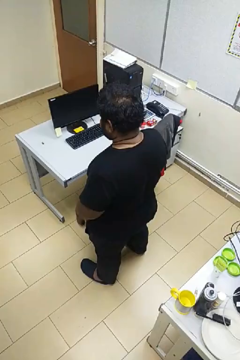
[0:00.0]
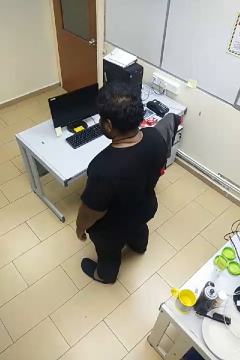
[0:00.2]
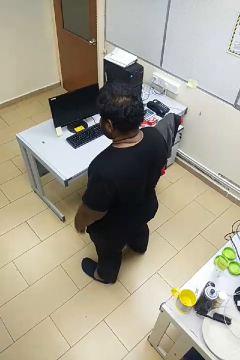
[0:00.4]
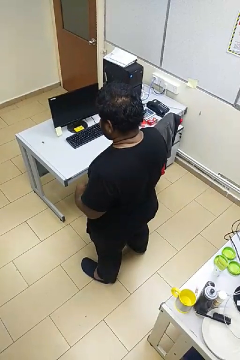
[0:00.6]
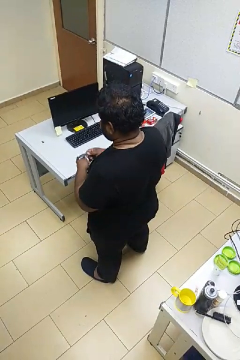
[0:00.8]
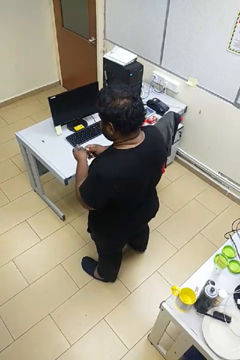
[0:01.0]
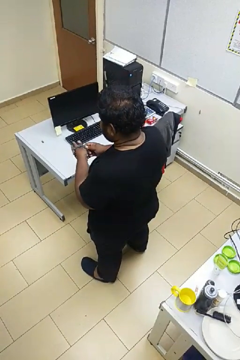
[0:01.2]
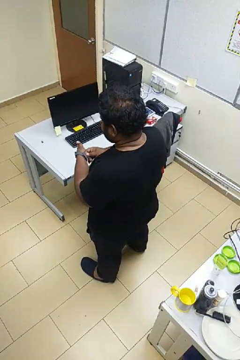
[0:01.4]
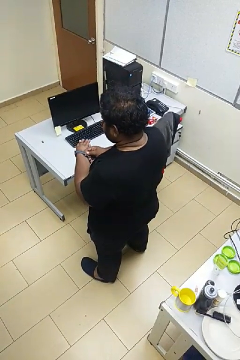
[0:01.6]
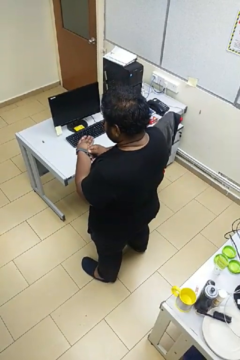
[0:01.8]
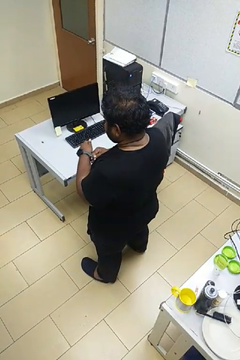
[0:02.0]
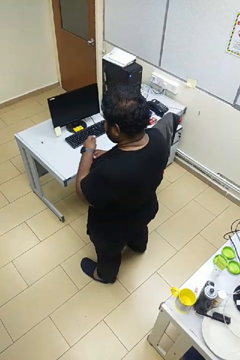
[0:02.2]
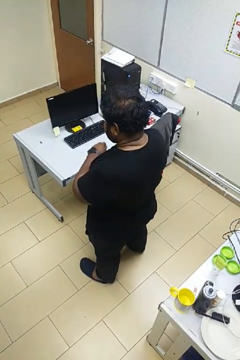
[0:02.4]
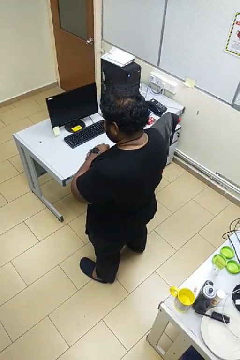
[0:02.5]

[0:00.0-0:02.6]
person puts on wristwatch

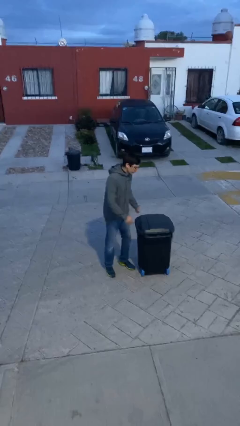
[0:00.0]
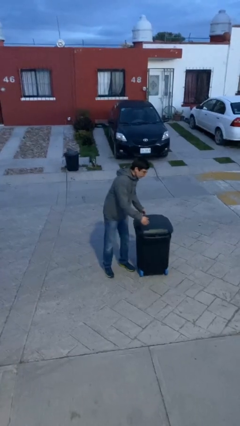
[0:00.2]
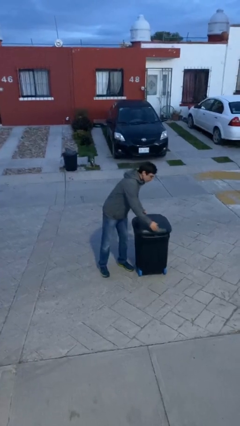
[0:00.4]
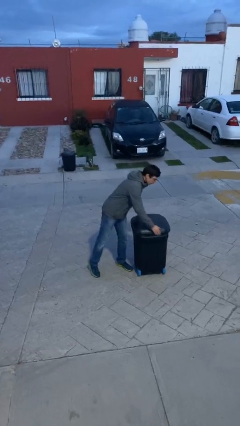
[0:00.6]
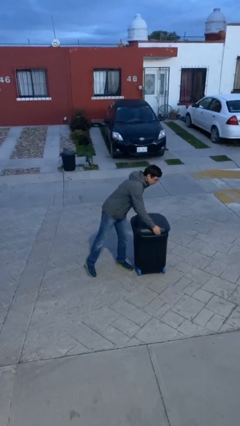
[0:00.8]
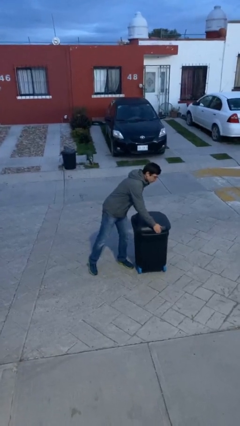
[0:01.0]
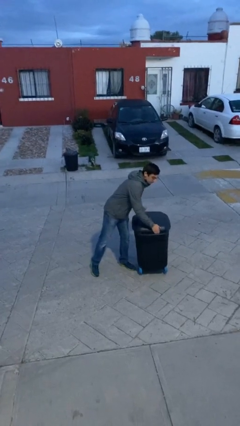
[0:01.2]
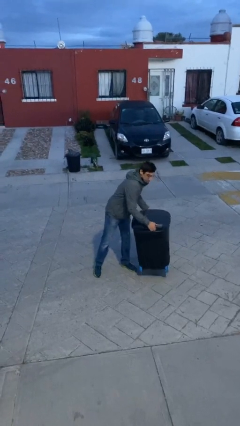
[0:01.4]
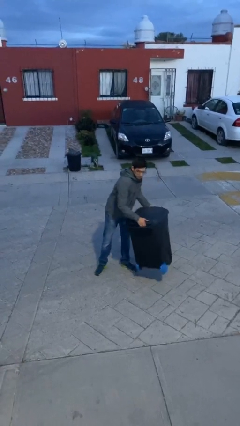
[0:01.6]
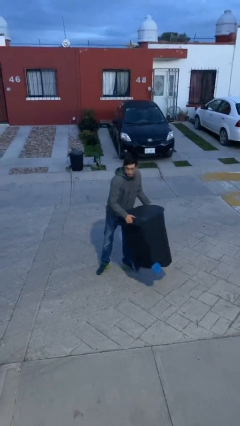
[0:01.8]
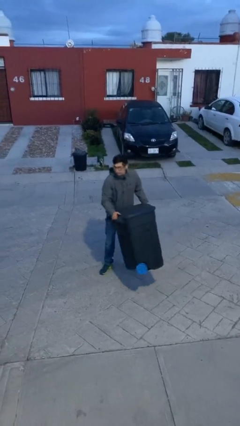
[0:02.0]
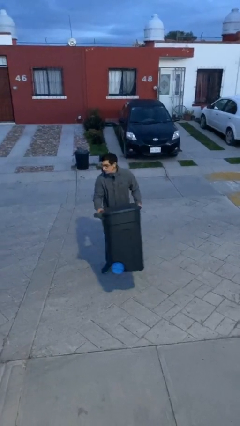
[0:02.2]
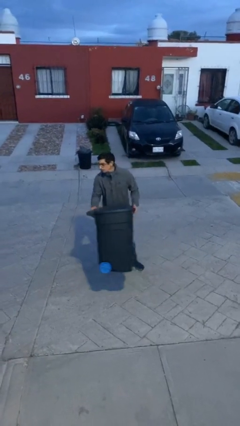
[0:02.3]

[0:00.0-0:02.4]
person picks up object from floor

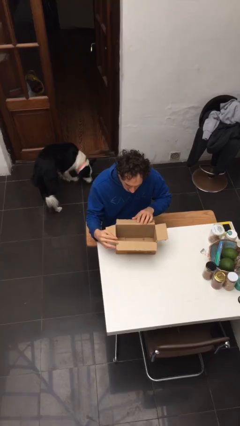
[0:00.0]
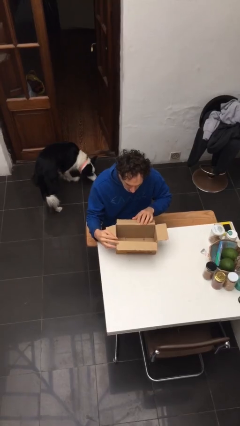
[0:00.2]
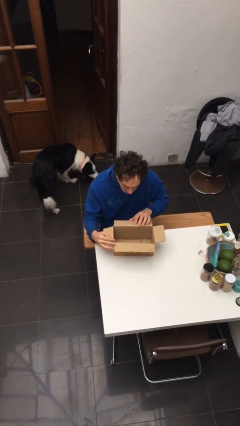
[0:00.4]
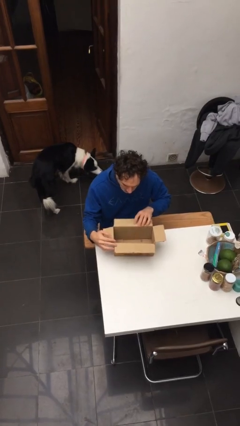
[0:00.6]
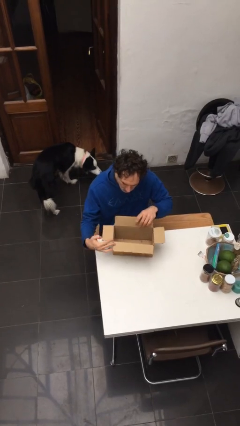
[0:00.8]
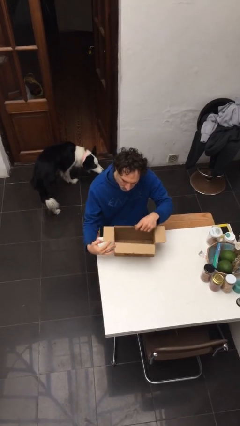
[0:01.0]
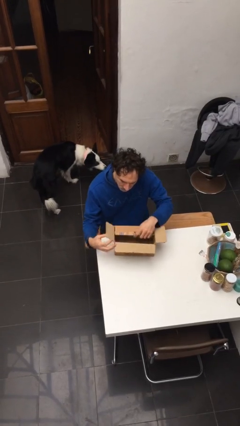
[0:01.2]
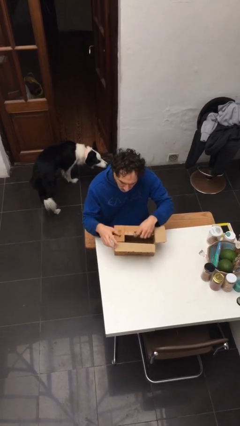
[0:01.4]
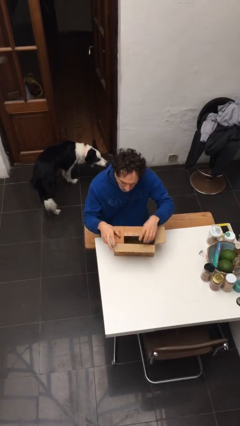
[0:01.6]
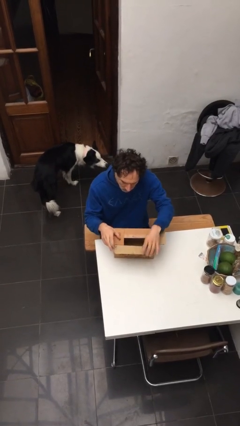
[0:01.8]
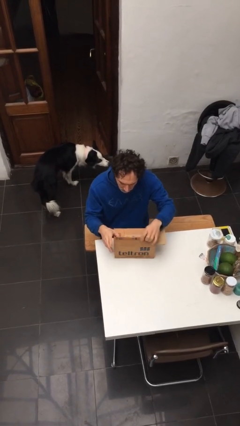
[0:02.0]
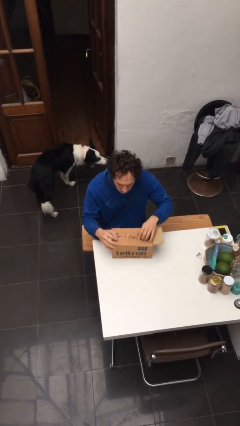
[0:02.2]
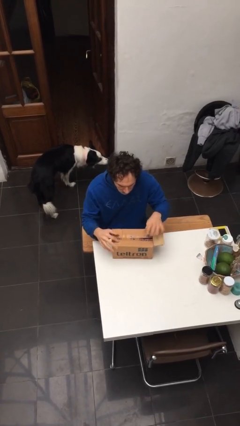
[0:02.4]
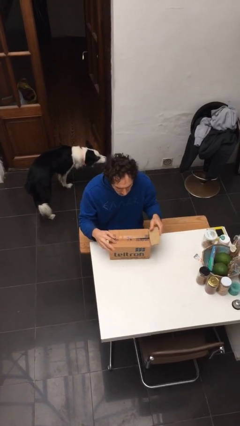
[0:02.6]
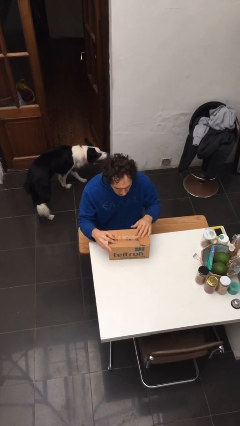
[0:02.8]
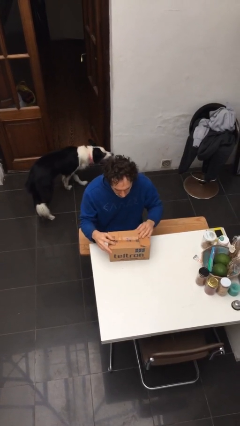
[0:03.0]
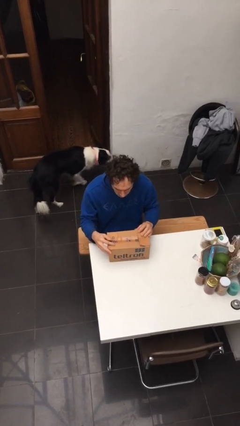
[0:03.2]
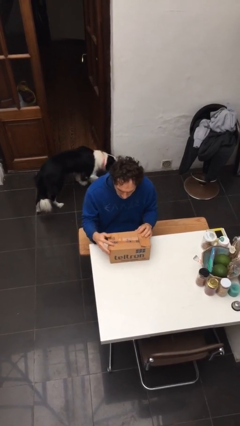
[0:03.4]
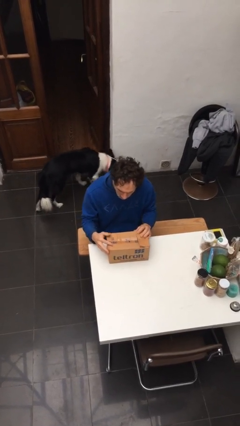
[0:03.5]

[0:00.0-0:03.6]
person closes box

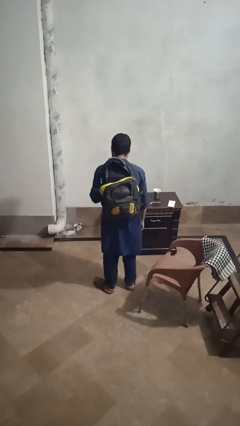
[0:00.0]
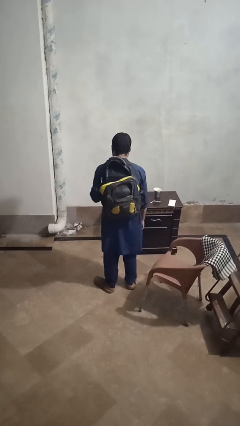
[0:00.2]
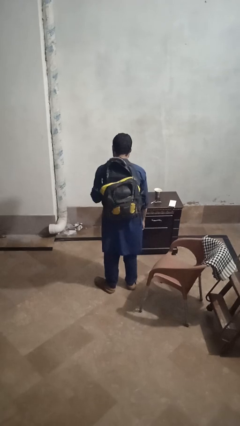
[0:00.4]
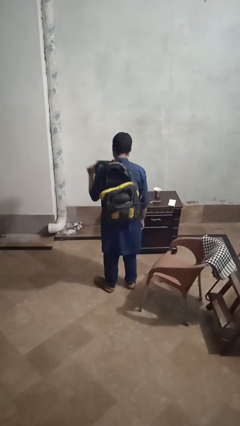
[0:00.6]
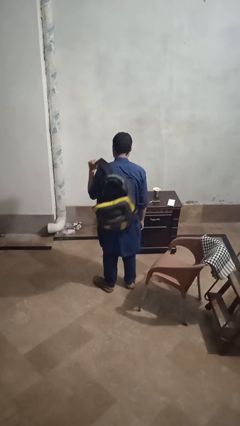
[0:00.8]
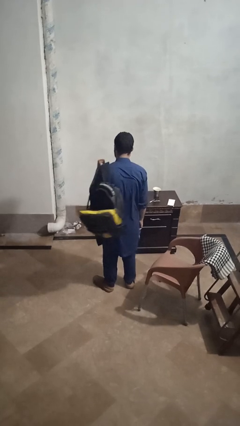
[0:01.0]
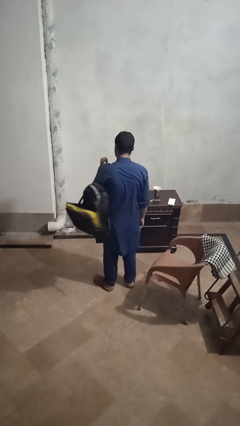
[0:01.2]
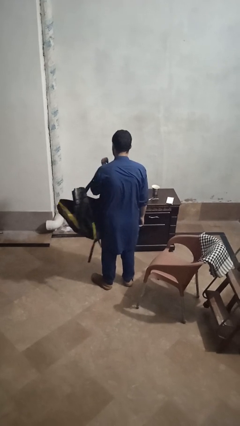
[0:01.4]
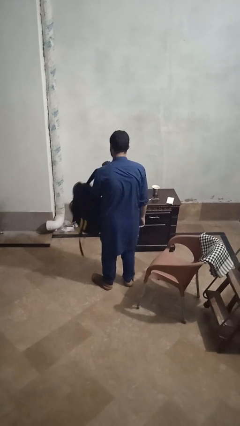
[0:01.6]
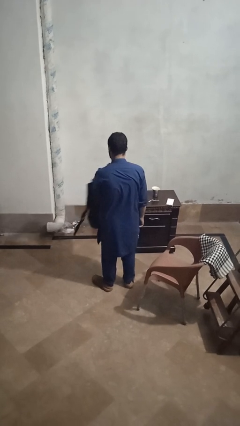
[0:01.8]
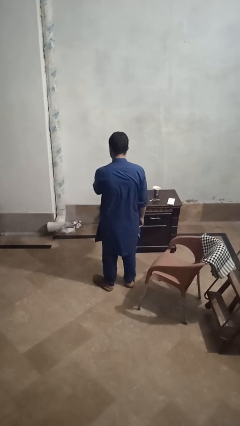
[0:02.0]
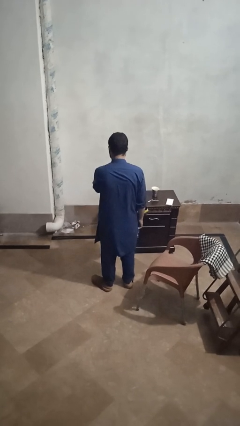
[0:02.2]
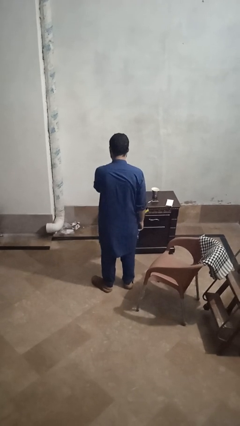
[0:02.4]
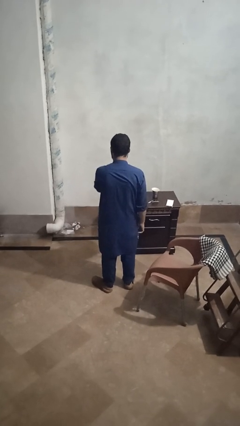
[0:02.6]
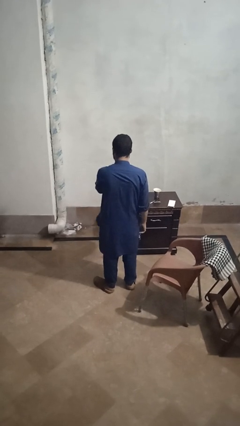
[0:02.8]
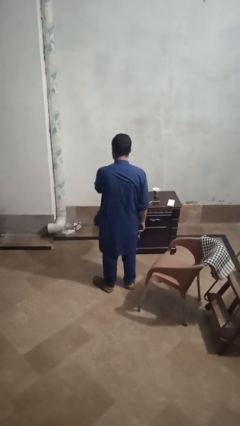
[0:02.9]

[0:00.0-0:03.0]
person takes off backpack

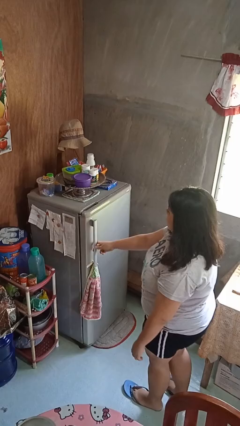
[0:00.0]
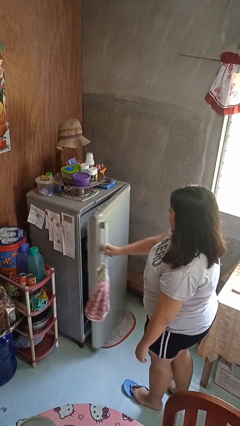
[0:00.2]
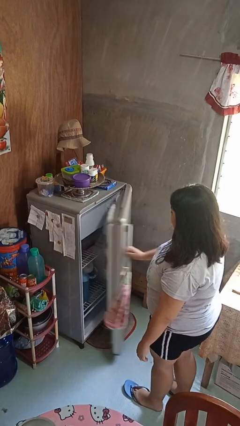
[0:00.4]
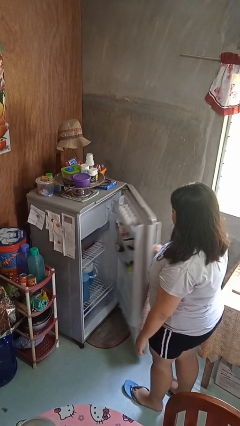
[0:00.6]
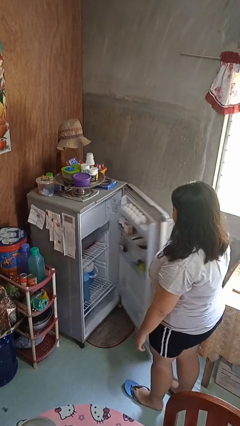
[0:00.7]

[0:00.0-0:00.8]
person opens refrigerator

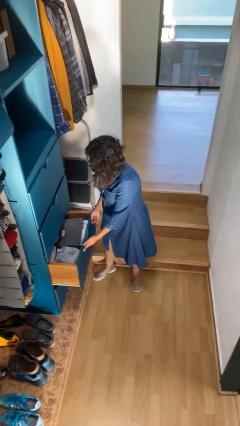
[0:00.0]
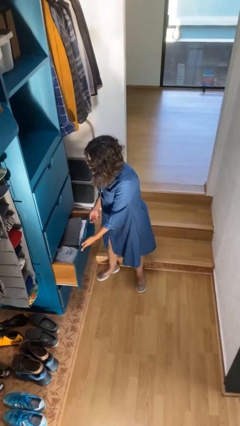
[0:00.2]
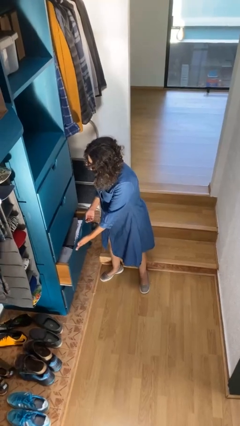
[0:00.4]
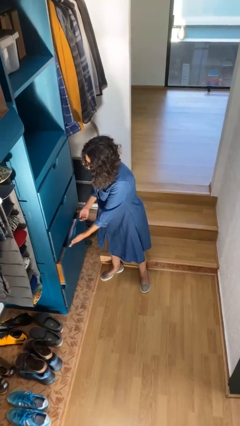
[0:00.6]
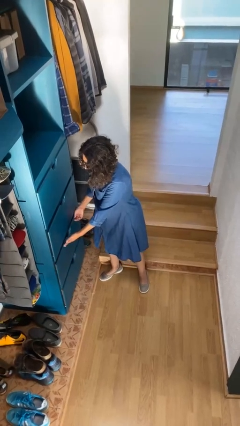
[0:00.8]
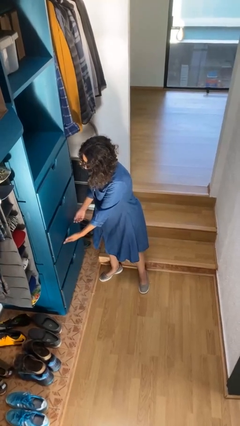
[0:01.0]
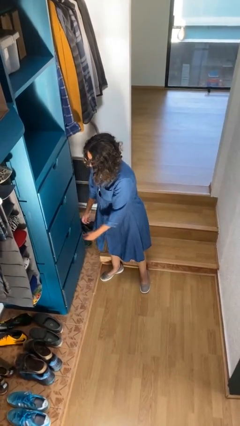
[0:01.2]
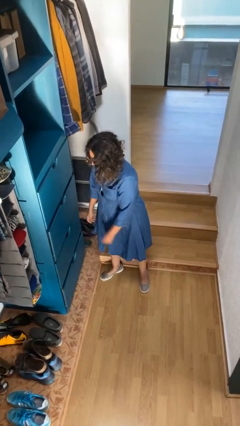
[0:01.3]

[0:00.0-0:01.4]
person closes dresser drawer

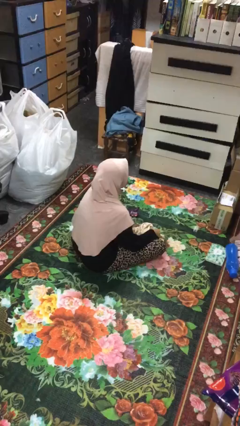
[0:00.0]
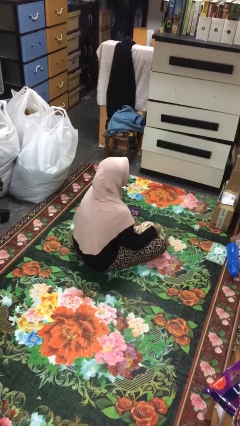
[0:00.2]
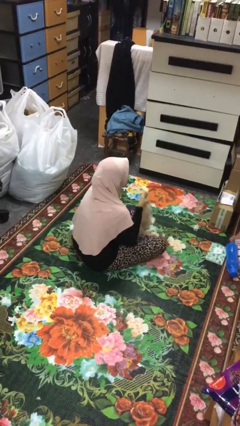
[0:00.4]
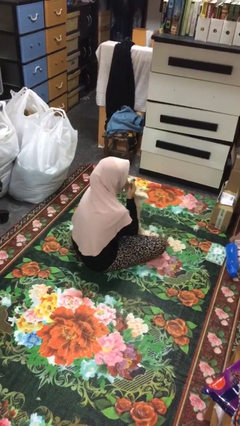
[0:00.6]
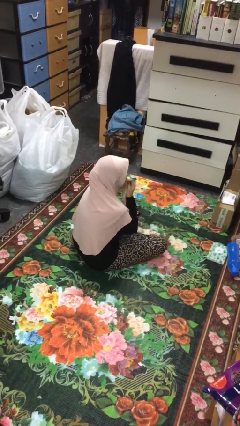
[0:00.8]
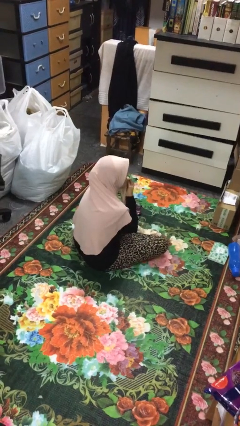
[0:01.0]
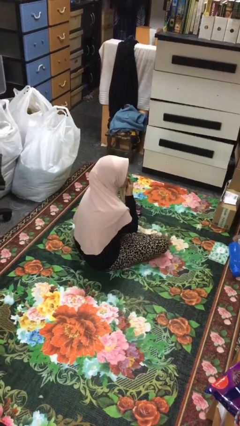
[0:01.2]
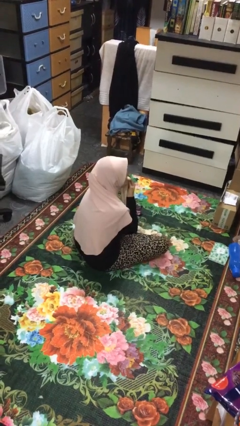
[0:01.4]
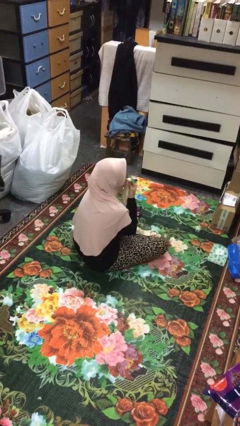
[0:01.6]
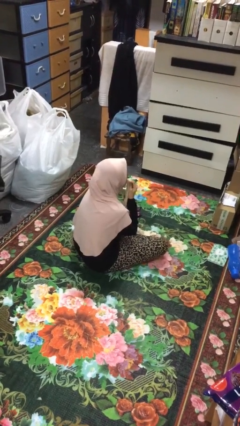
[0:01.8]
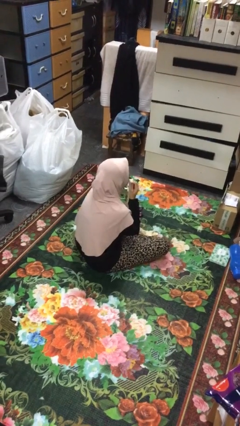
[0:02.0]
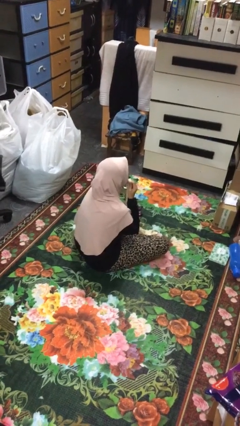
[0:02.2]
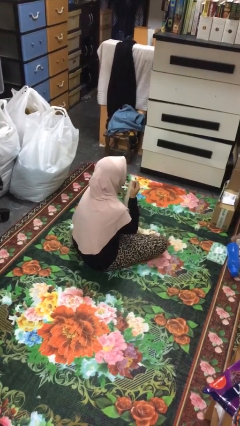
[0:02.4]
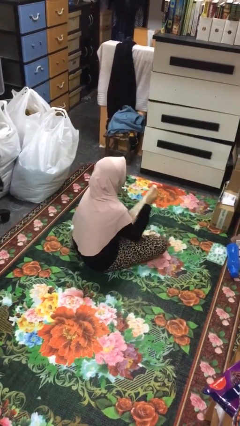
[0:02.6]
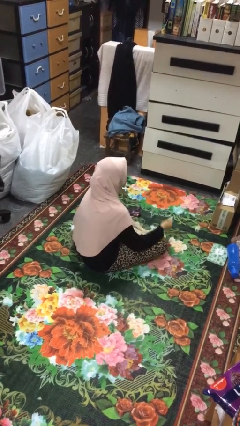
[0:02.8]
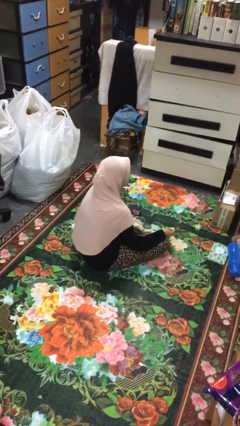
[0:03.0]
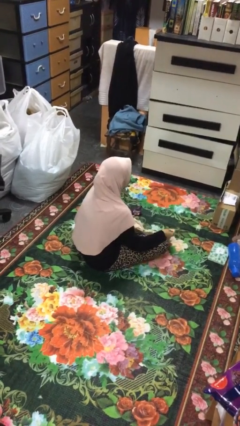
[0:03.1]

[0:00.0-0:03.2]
person wipes mouth with napkin

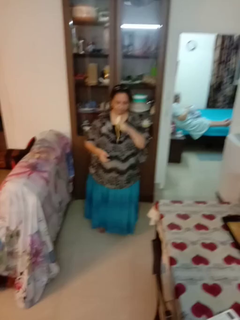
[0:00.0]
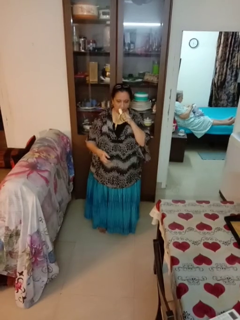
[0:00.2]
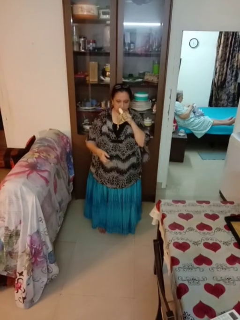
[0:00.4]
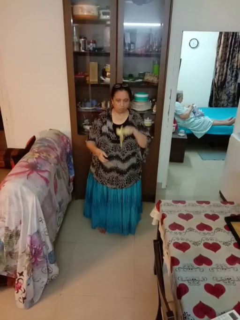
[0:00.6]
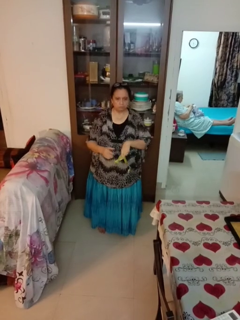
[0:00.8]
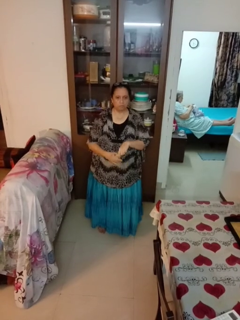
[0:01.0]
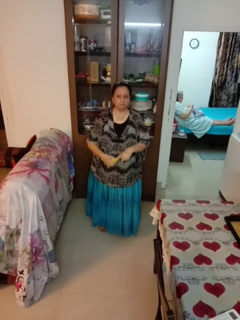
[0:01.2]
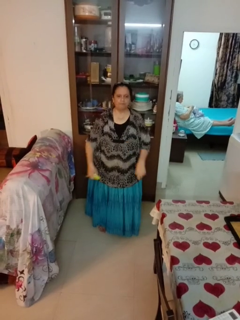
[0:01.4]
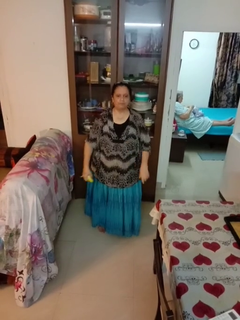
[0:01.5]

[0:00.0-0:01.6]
person eats banana
